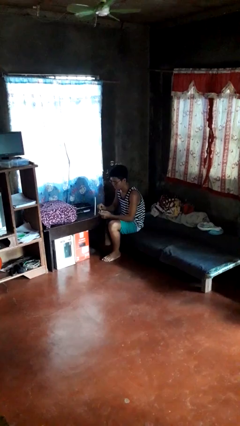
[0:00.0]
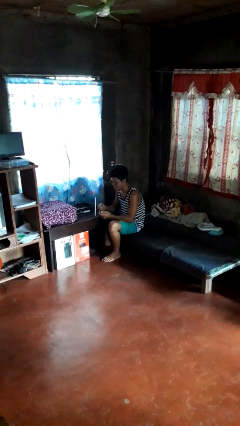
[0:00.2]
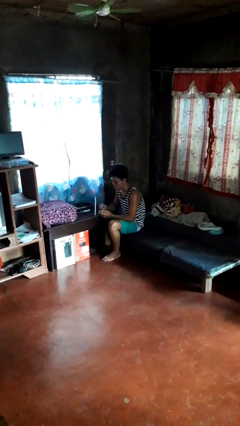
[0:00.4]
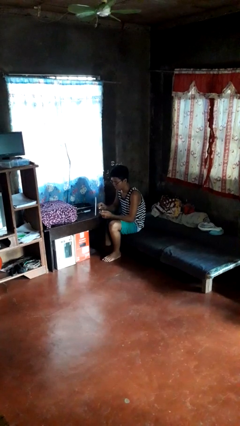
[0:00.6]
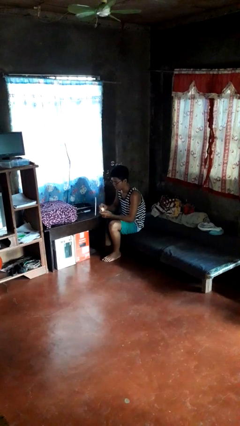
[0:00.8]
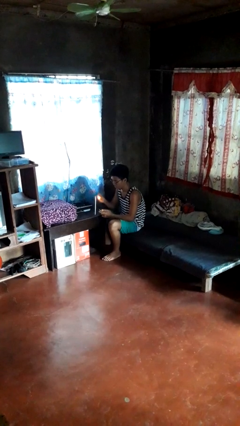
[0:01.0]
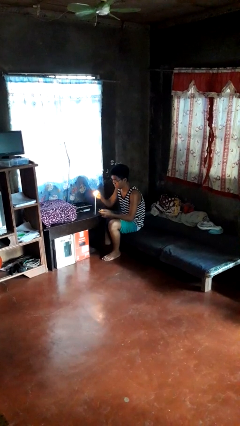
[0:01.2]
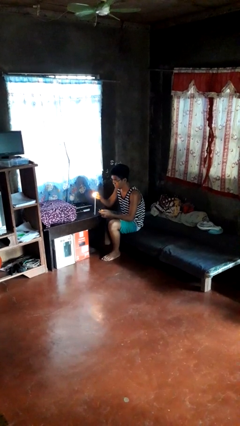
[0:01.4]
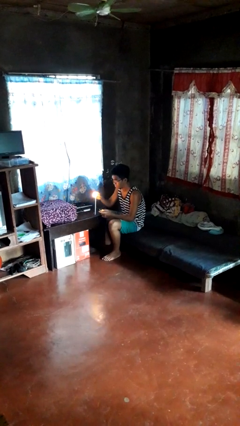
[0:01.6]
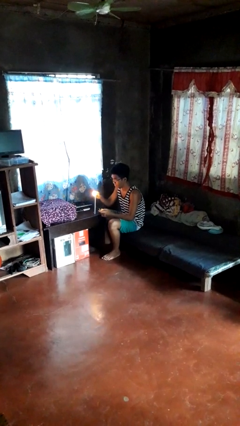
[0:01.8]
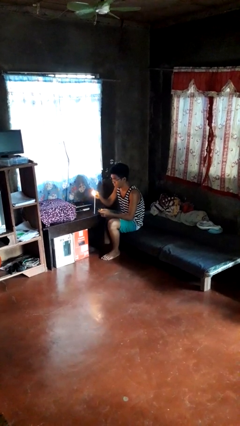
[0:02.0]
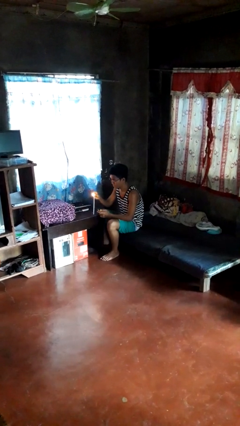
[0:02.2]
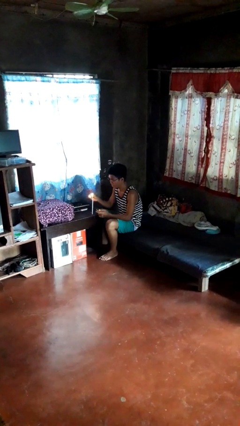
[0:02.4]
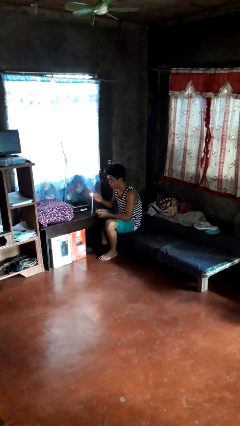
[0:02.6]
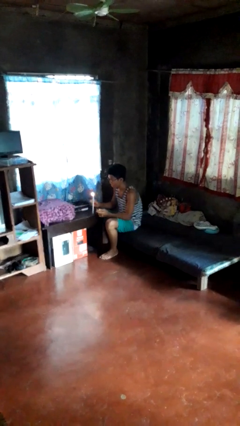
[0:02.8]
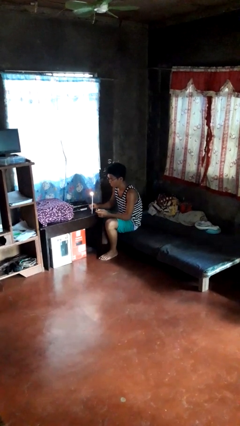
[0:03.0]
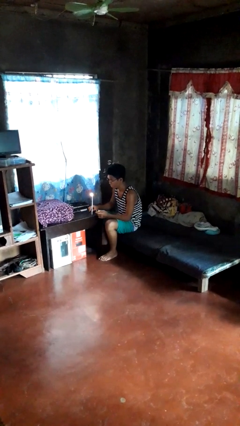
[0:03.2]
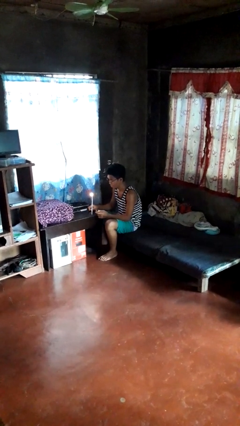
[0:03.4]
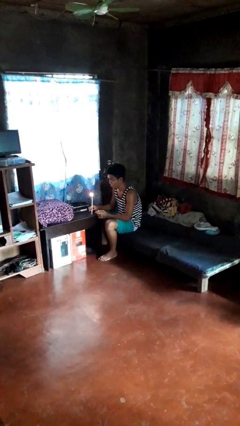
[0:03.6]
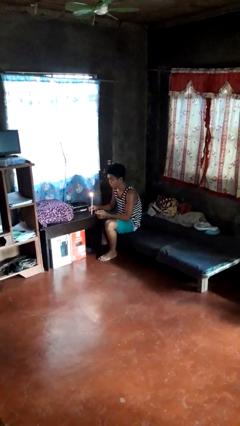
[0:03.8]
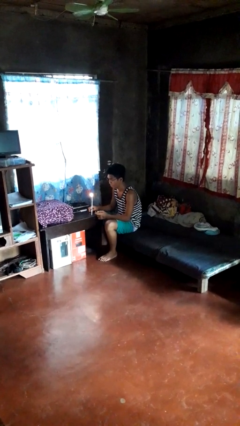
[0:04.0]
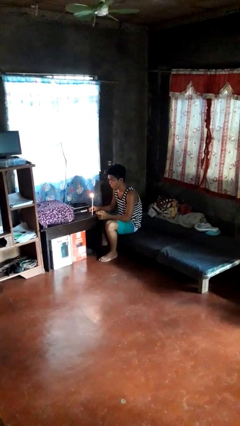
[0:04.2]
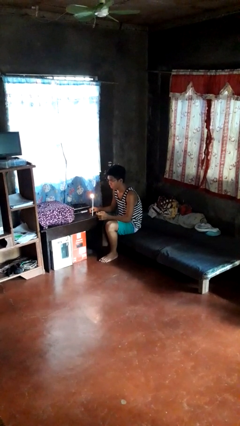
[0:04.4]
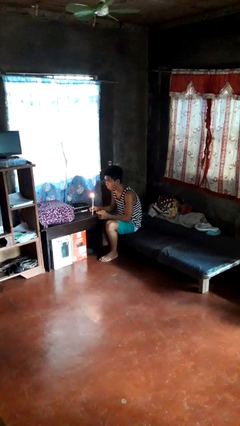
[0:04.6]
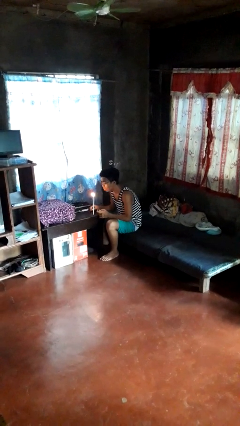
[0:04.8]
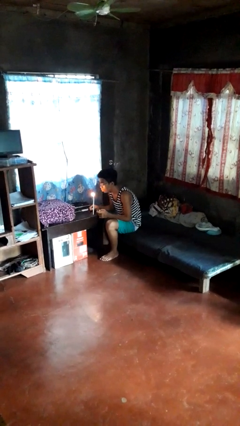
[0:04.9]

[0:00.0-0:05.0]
person lights candle

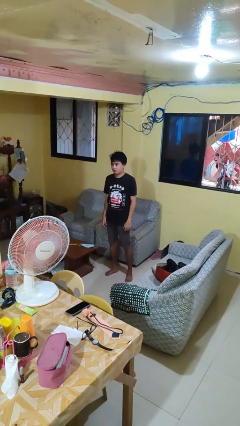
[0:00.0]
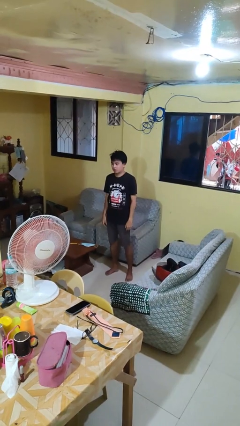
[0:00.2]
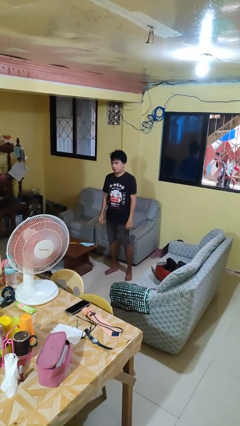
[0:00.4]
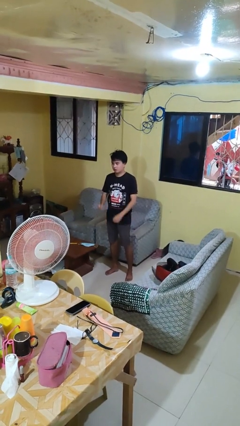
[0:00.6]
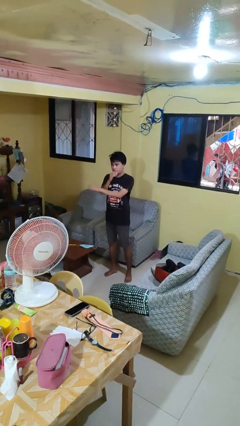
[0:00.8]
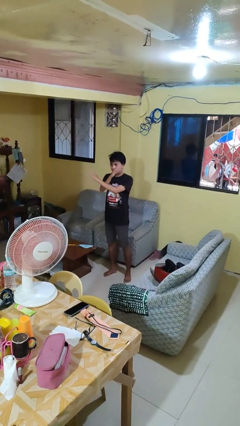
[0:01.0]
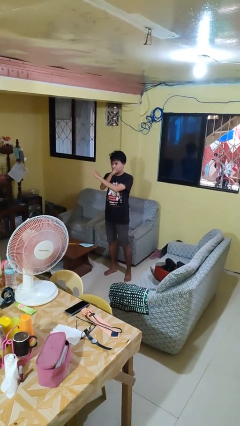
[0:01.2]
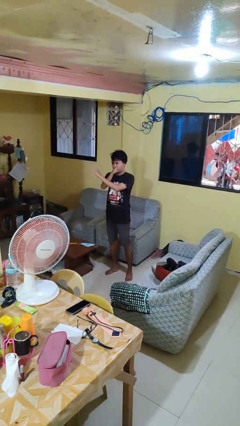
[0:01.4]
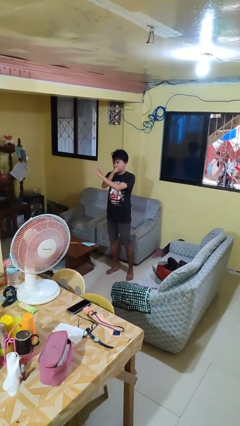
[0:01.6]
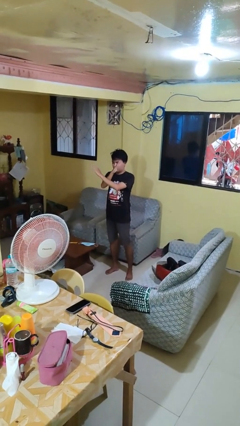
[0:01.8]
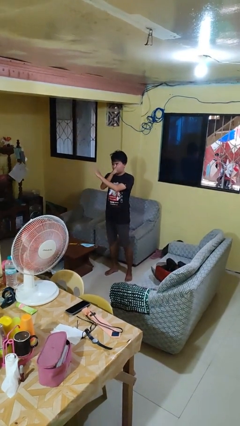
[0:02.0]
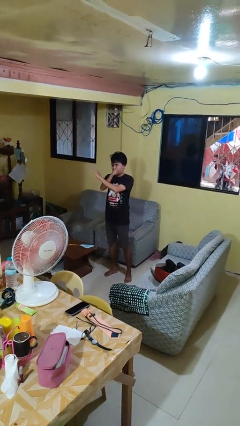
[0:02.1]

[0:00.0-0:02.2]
person gestures arms x

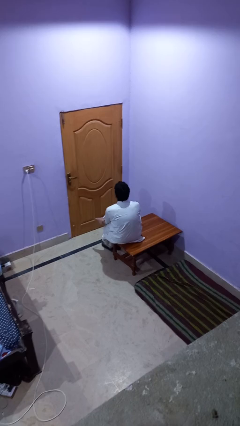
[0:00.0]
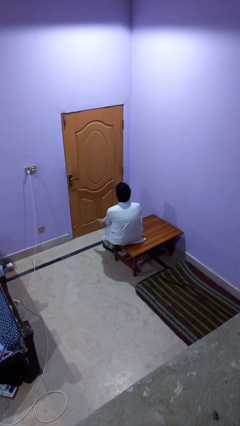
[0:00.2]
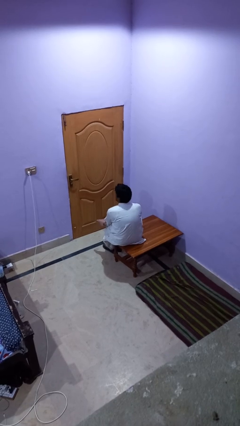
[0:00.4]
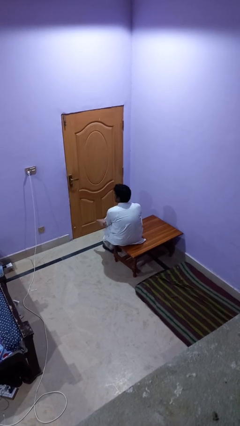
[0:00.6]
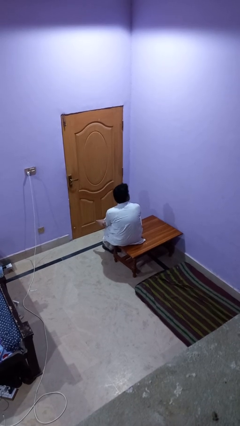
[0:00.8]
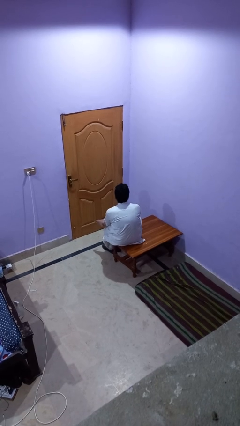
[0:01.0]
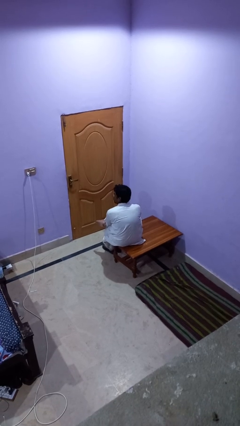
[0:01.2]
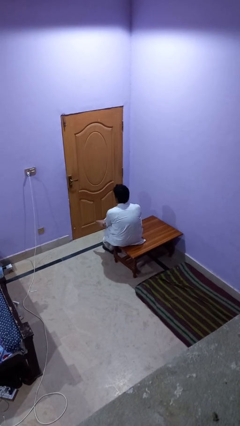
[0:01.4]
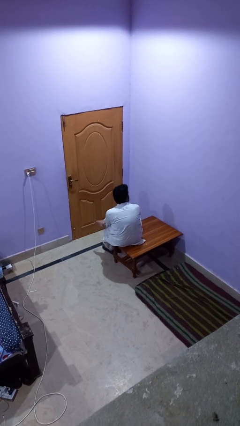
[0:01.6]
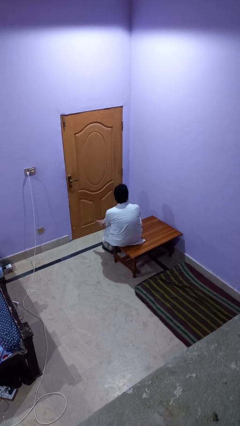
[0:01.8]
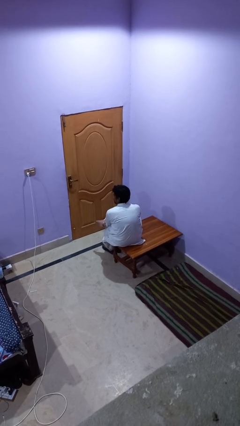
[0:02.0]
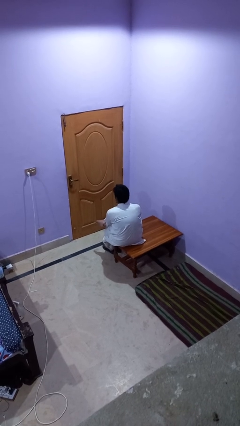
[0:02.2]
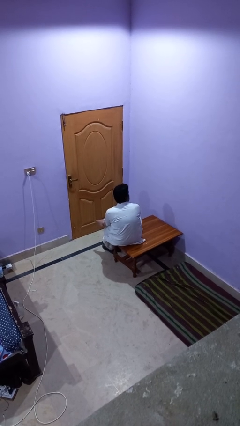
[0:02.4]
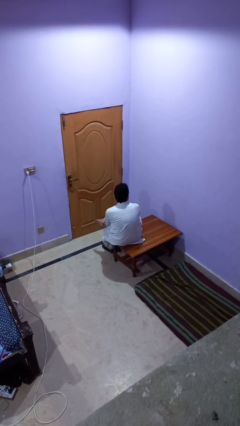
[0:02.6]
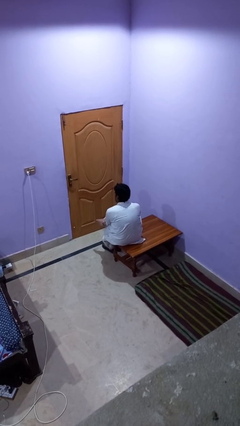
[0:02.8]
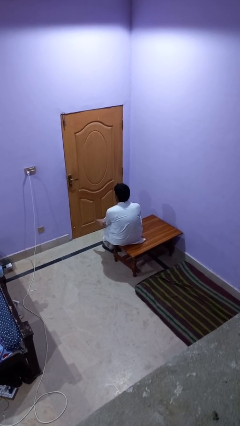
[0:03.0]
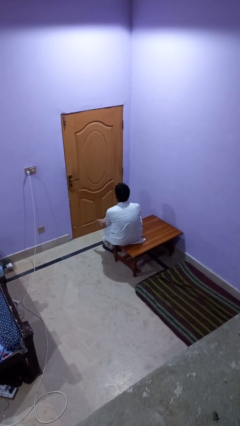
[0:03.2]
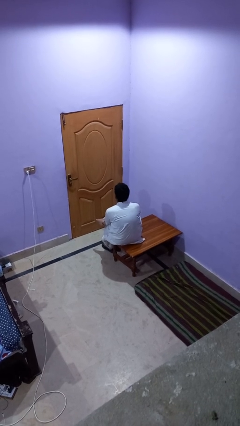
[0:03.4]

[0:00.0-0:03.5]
person shakes head

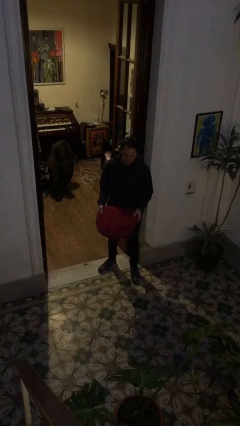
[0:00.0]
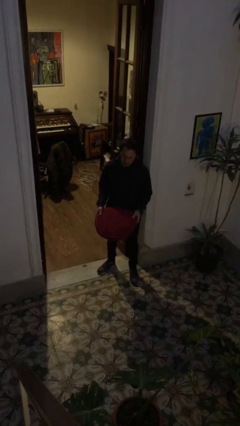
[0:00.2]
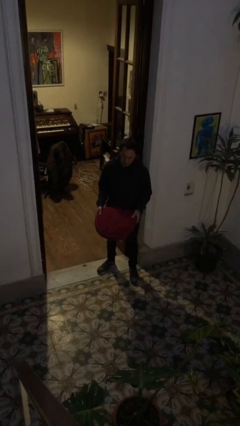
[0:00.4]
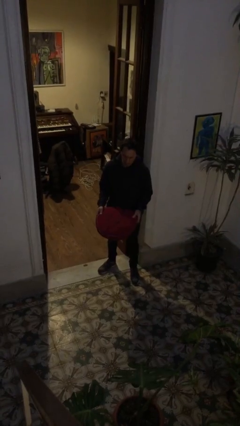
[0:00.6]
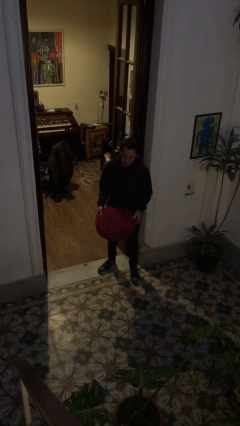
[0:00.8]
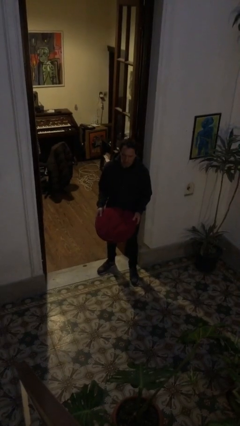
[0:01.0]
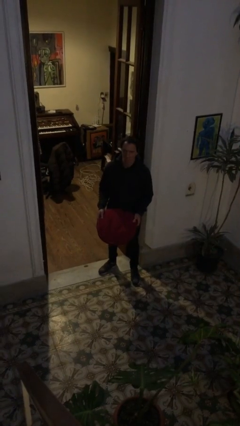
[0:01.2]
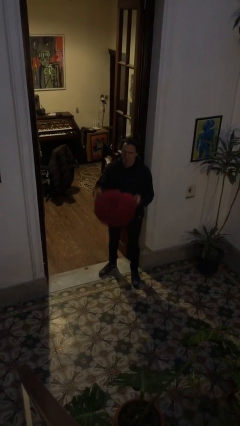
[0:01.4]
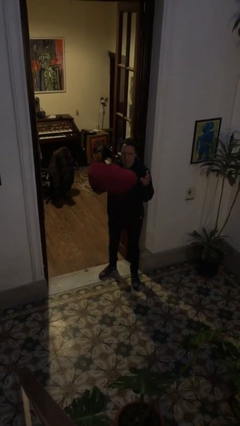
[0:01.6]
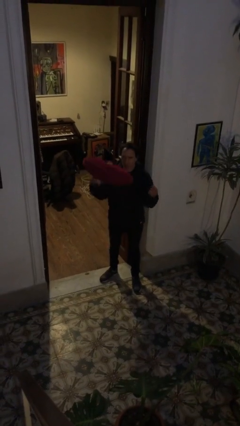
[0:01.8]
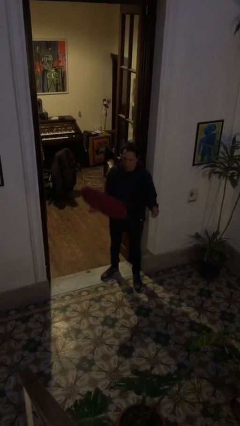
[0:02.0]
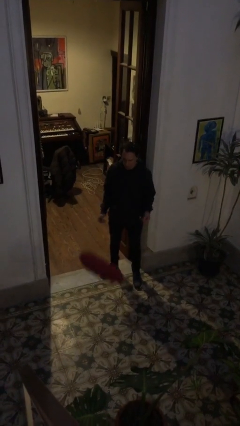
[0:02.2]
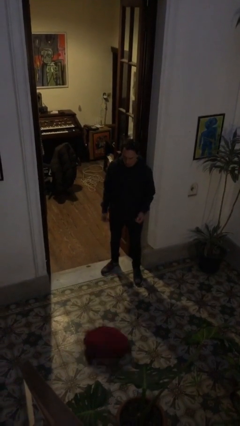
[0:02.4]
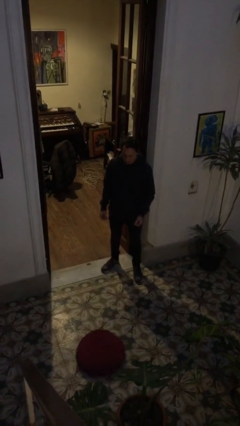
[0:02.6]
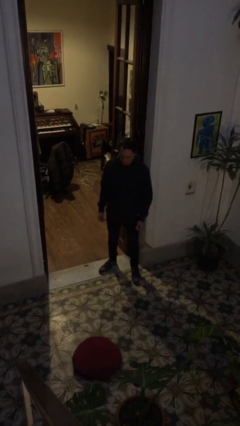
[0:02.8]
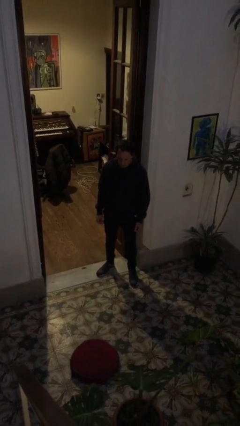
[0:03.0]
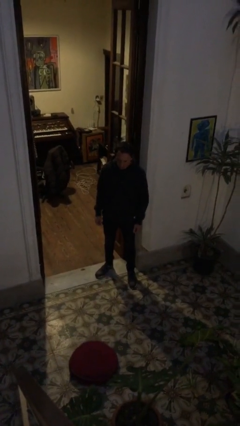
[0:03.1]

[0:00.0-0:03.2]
person throws object into air

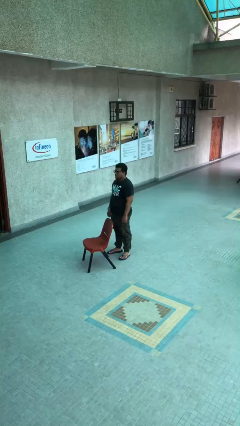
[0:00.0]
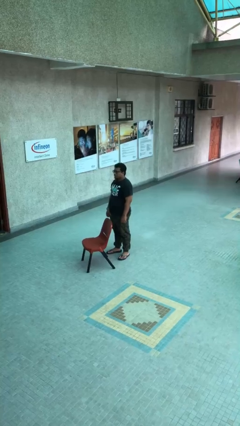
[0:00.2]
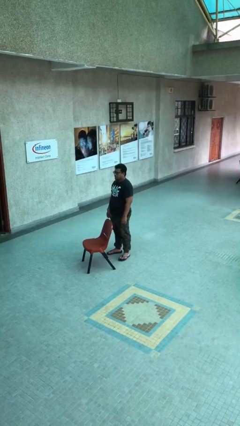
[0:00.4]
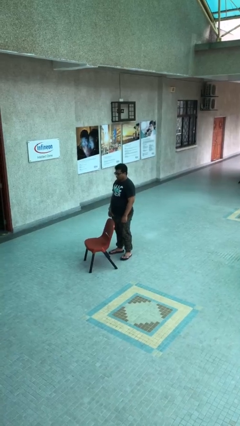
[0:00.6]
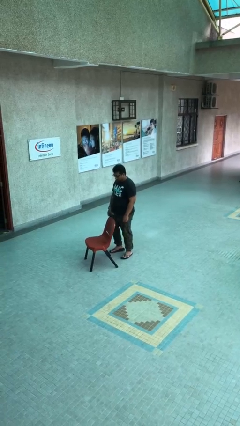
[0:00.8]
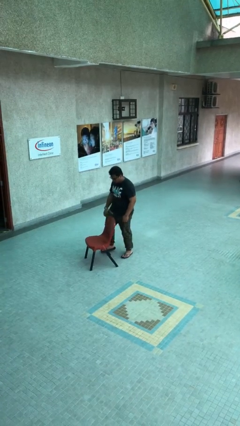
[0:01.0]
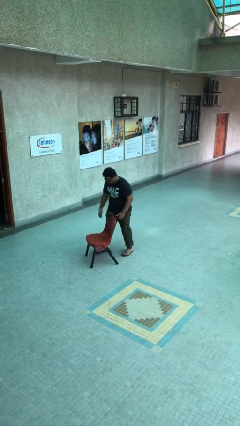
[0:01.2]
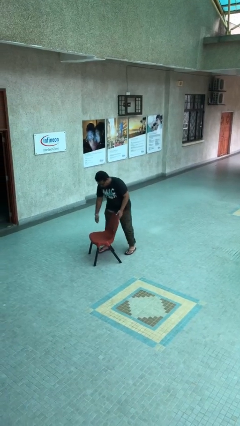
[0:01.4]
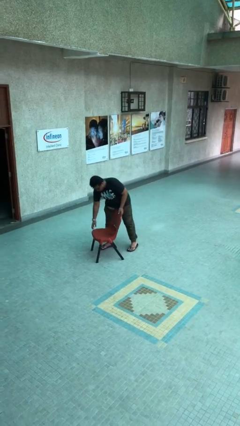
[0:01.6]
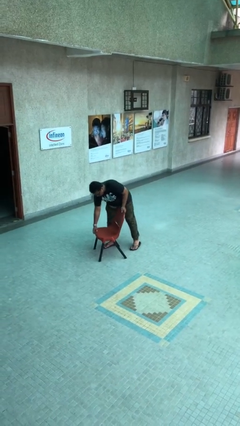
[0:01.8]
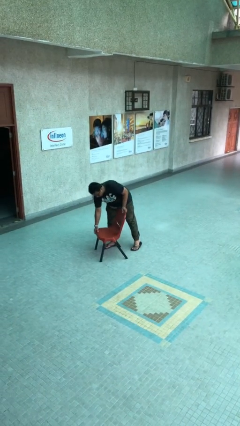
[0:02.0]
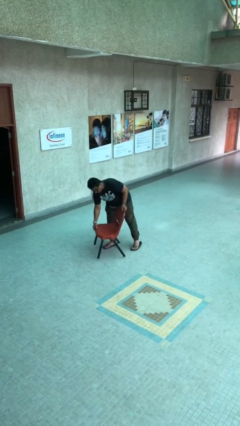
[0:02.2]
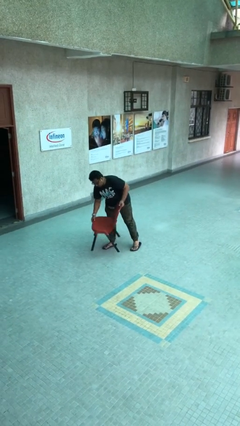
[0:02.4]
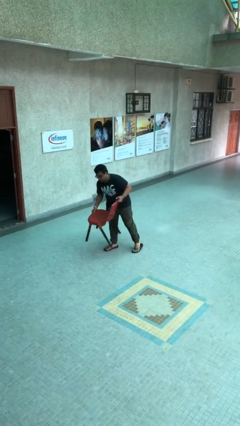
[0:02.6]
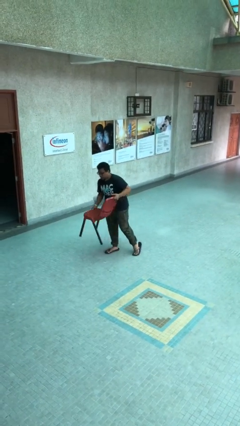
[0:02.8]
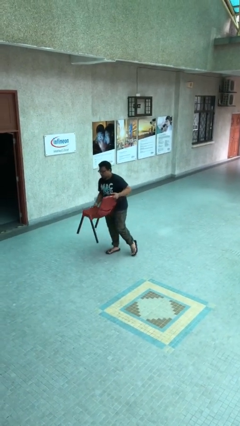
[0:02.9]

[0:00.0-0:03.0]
person picks up object from floor

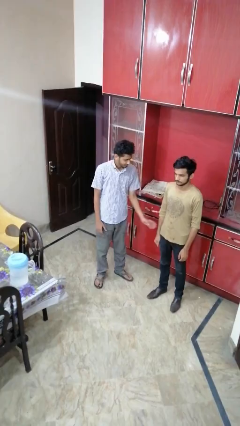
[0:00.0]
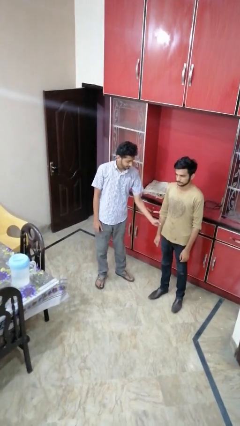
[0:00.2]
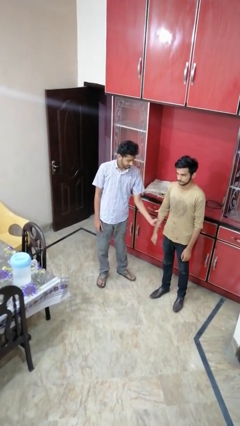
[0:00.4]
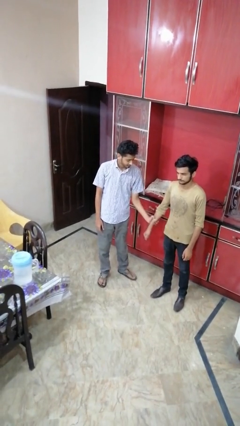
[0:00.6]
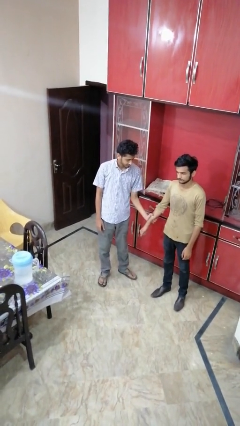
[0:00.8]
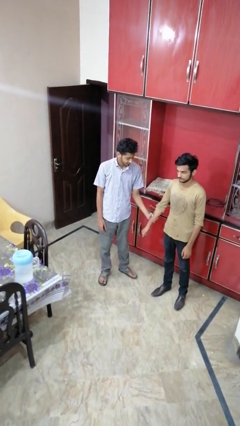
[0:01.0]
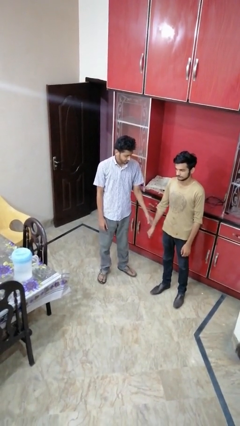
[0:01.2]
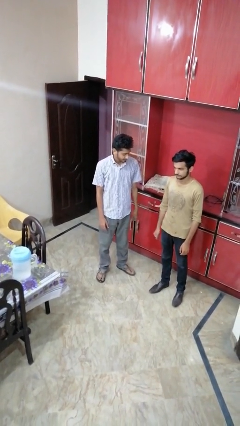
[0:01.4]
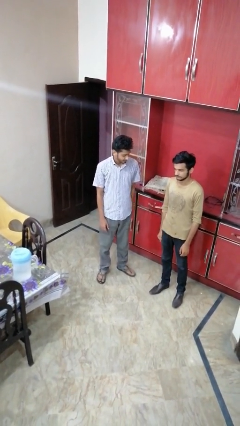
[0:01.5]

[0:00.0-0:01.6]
person grabs person by forearm
